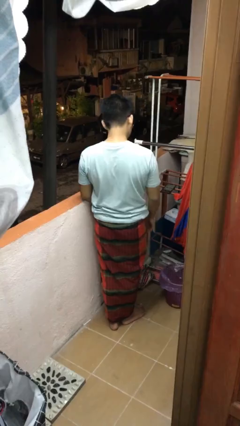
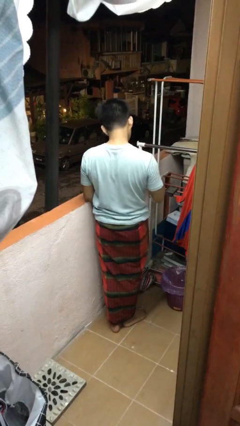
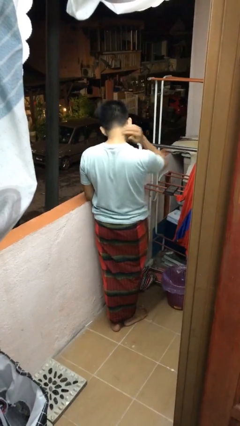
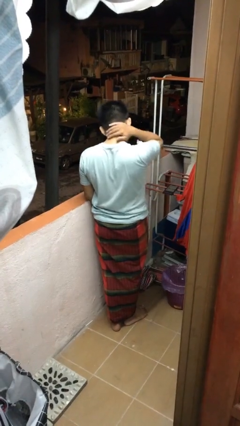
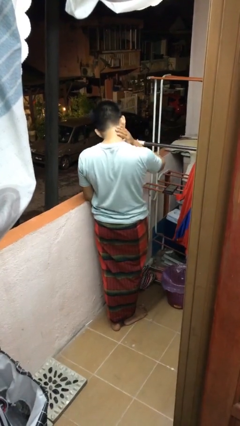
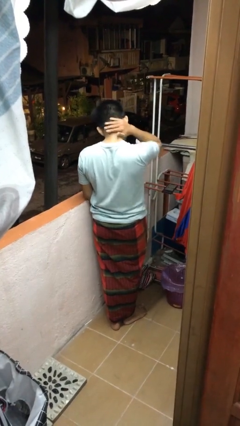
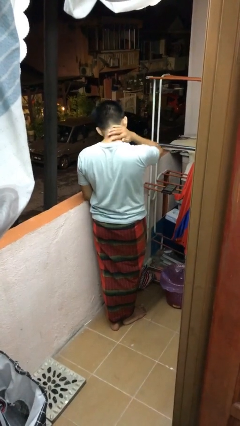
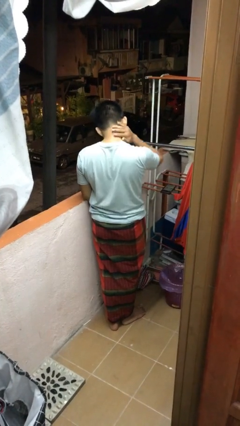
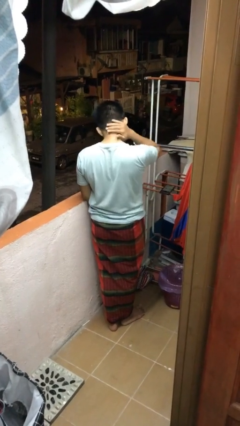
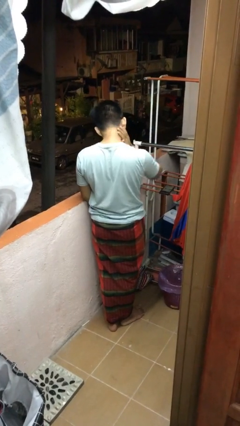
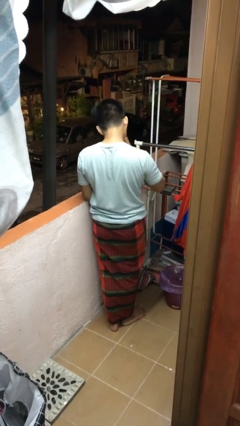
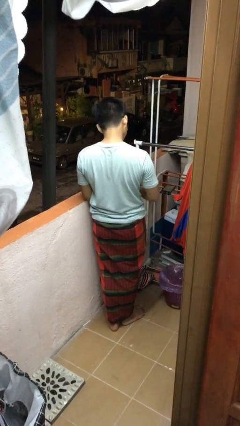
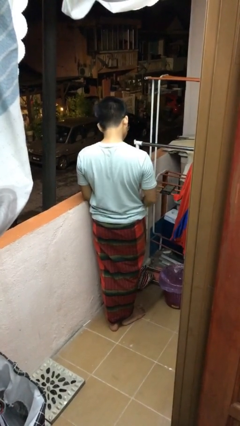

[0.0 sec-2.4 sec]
person rubs neck

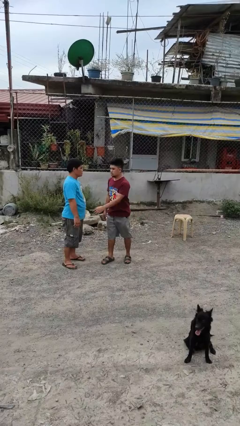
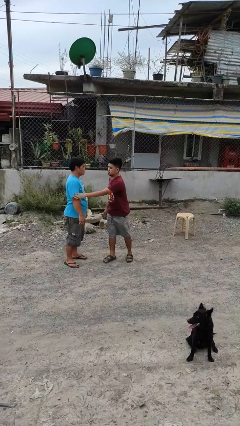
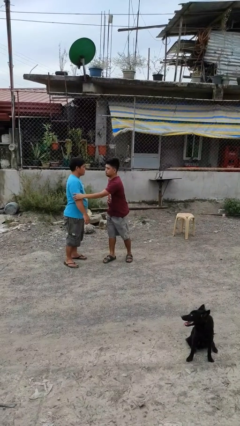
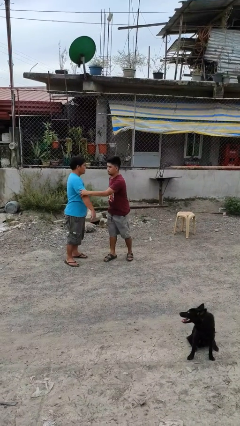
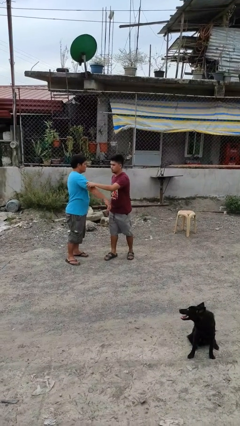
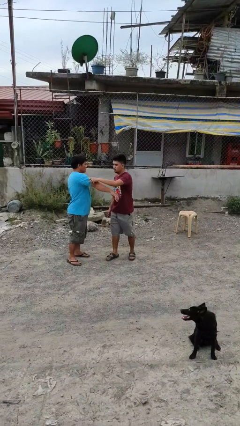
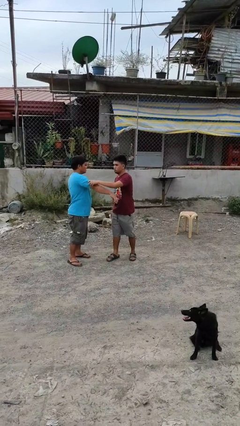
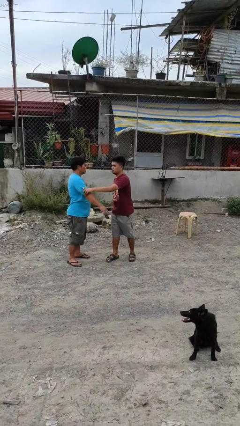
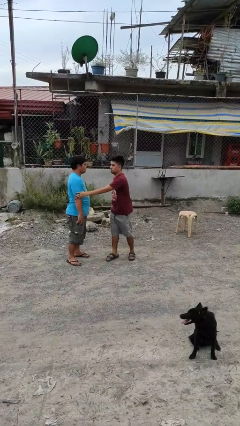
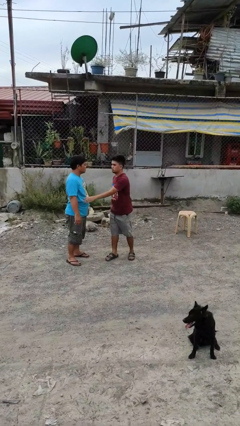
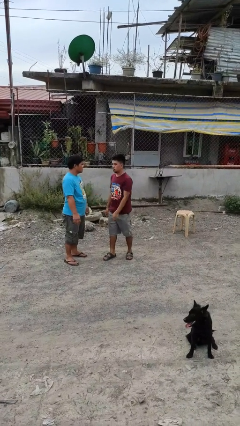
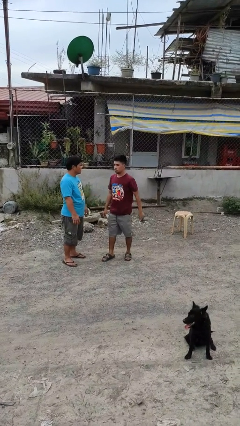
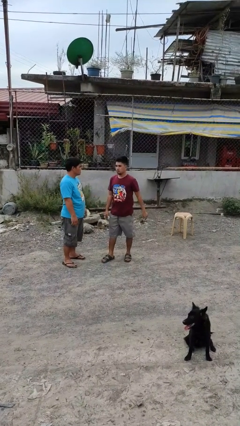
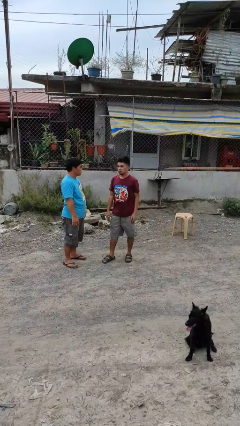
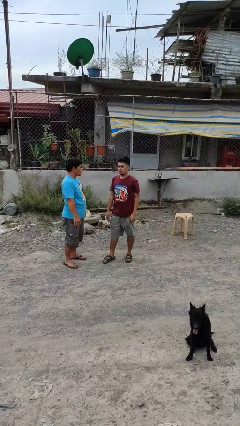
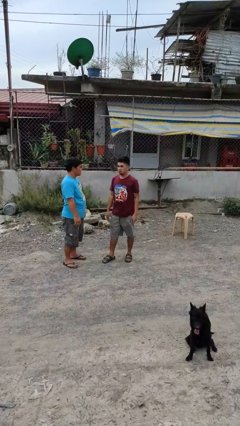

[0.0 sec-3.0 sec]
person grabs person by bicep

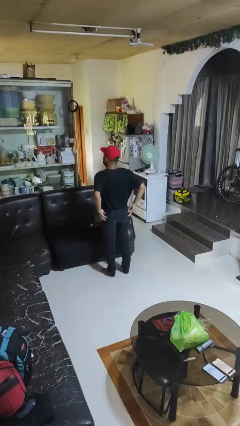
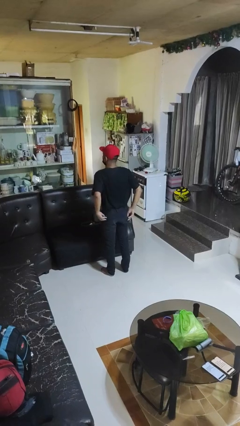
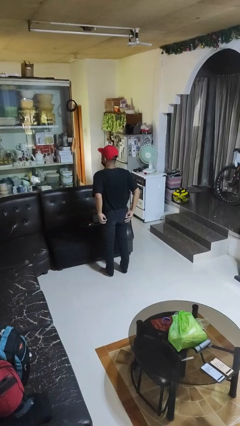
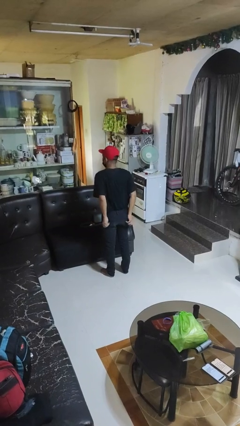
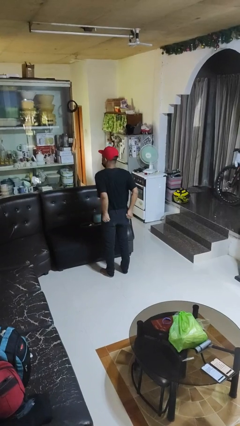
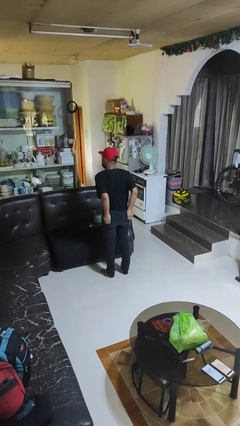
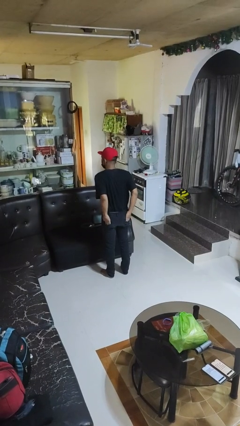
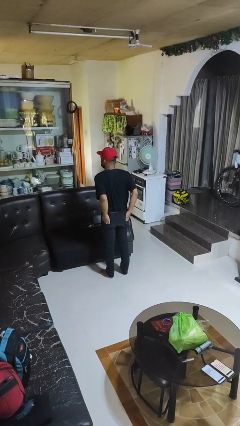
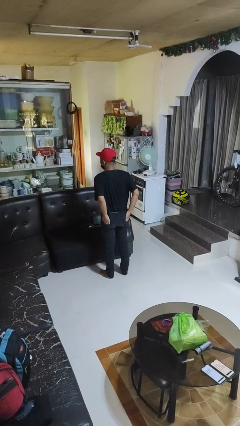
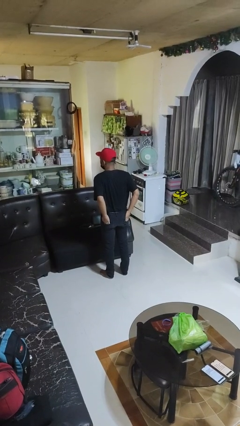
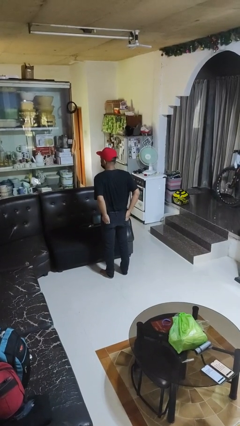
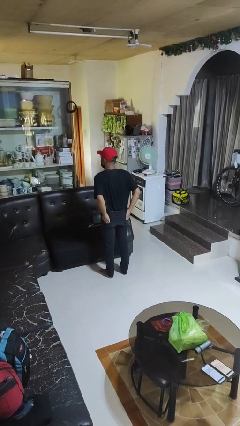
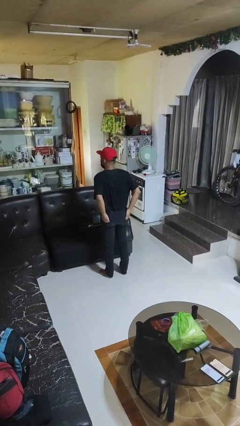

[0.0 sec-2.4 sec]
person puts hands in back pockets

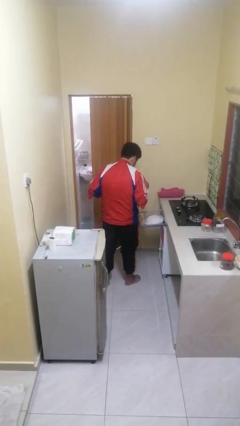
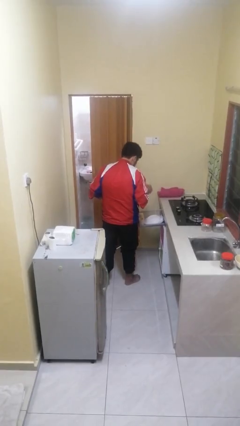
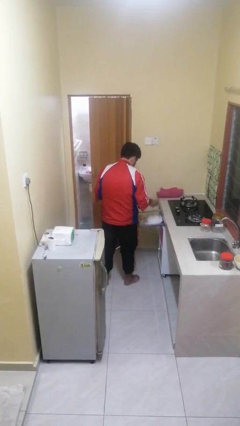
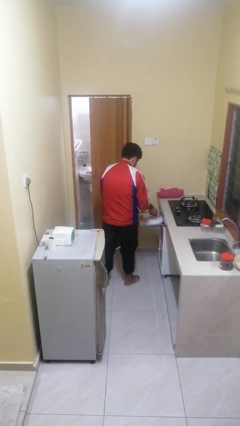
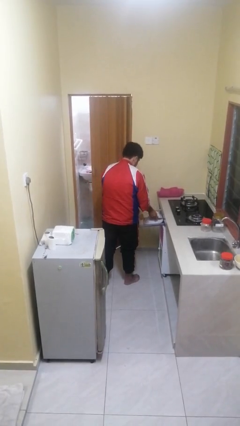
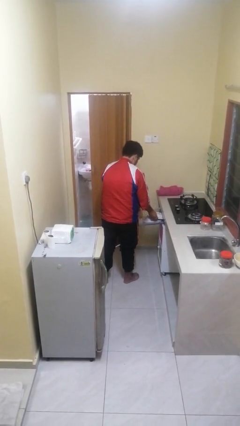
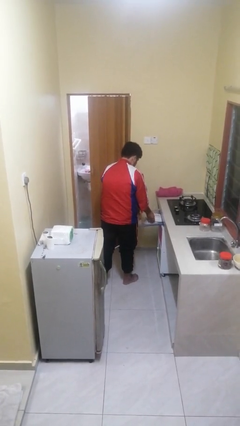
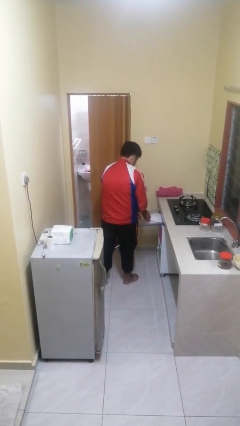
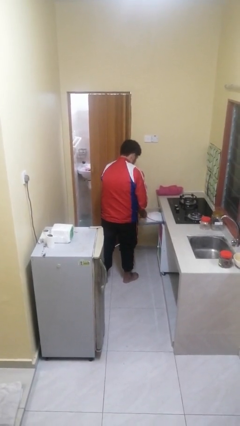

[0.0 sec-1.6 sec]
person puts object into kitchen drawer

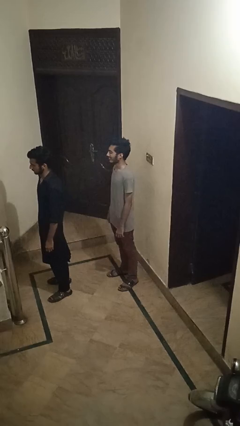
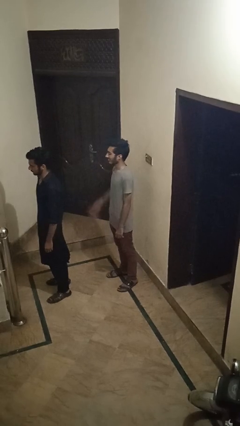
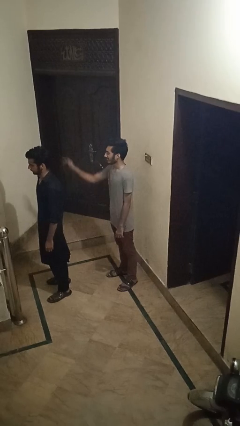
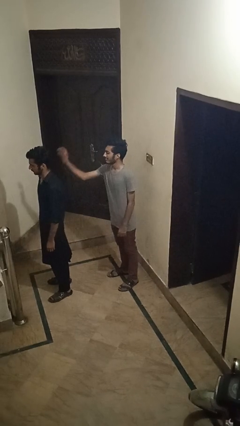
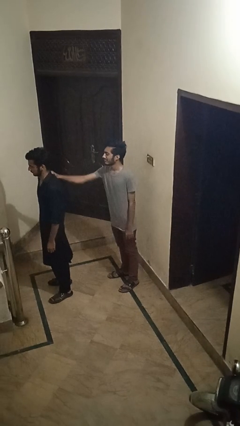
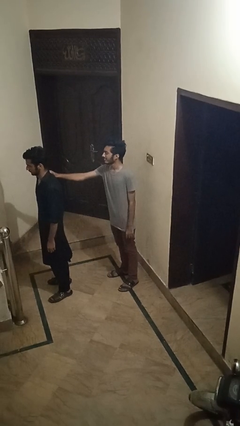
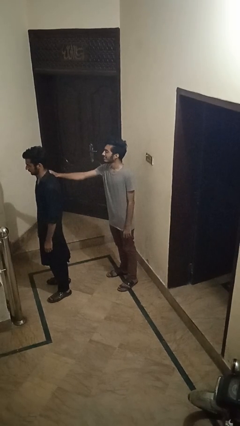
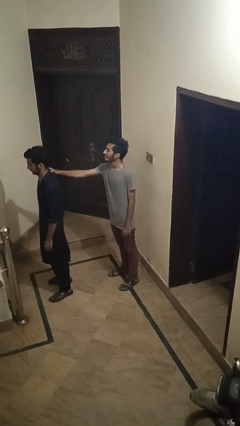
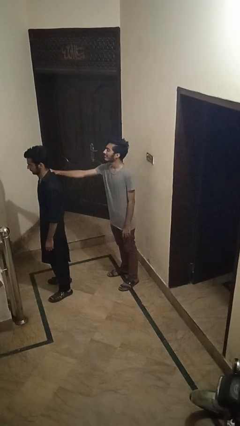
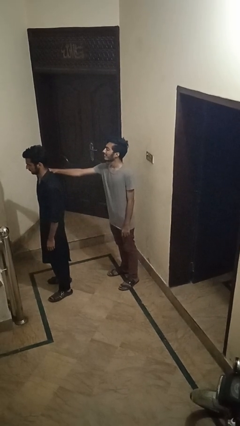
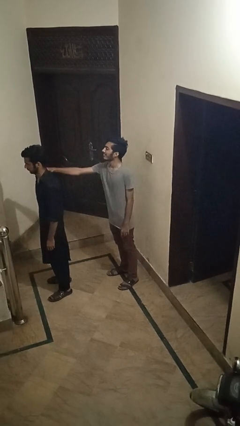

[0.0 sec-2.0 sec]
person grabs person by shoulder

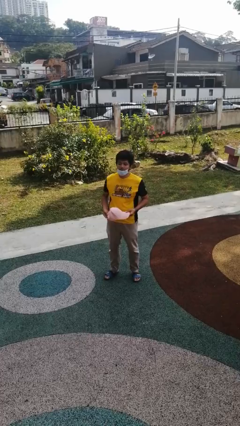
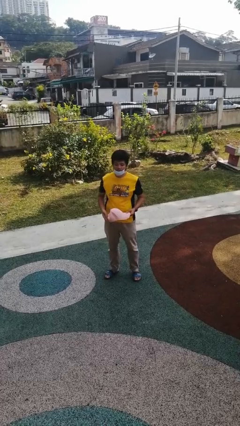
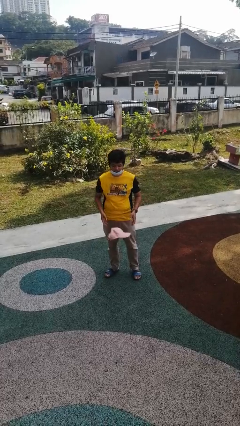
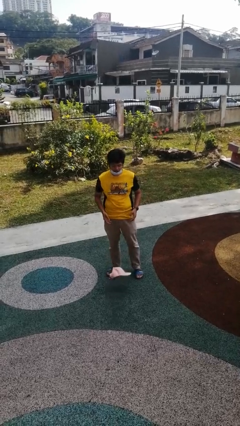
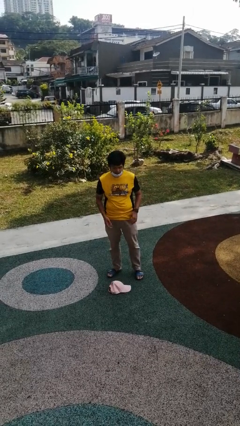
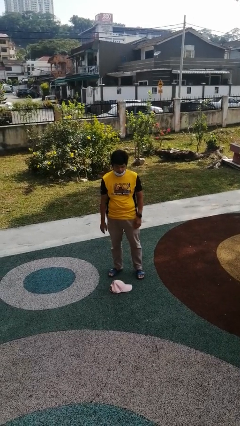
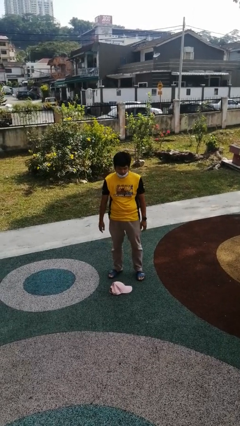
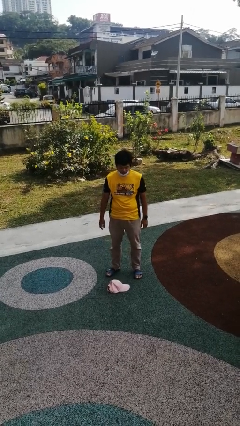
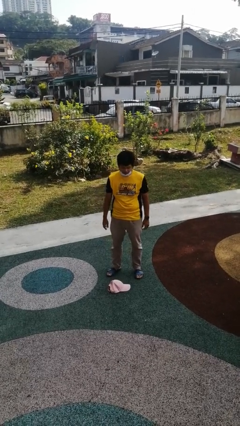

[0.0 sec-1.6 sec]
person drops object

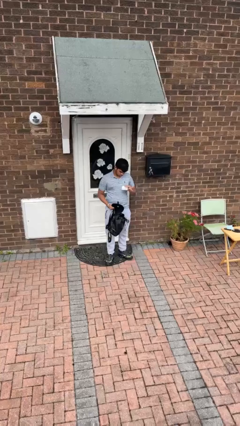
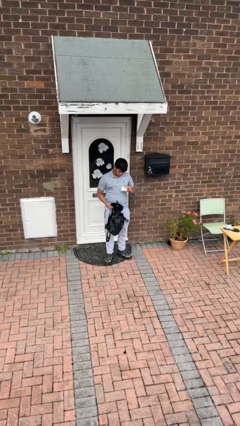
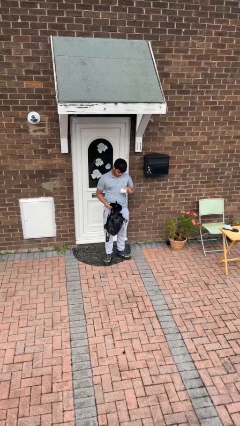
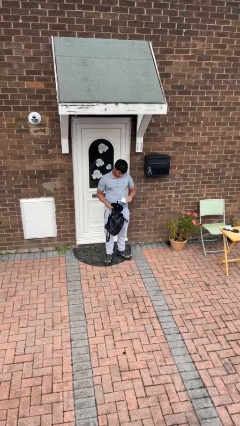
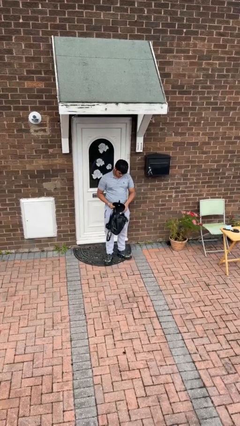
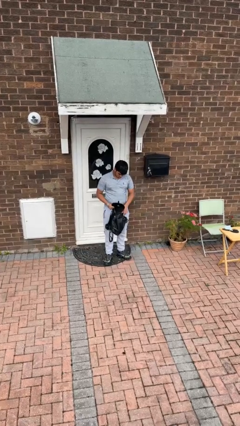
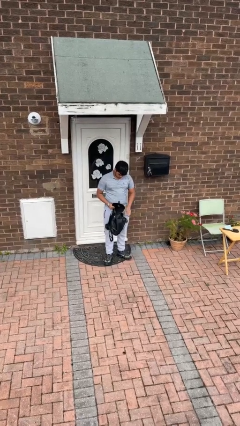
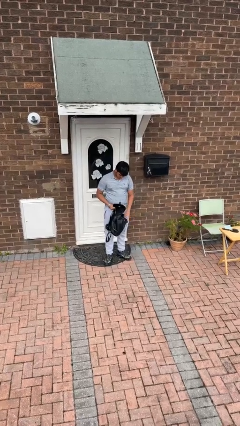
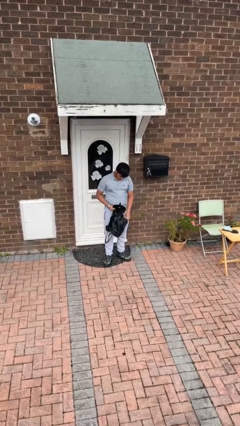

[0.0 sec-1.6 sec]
person puts object into backpack

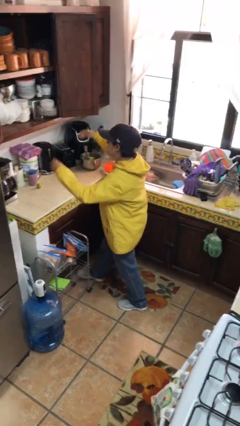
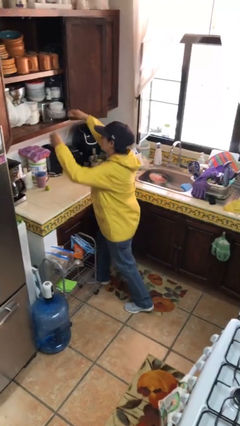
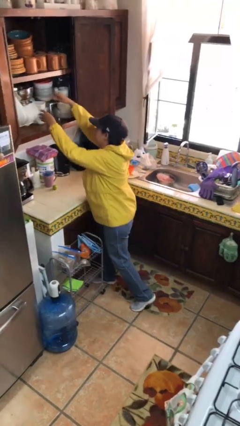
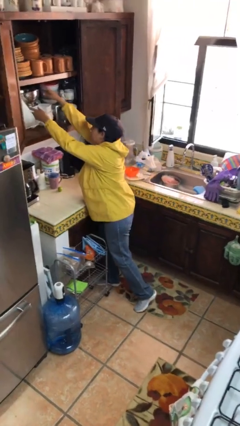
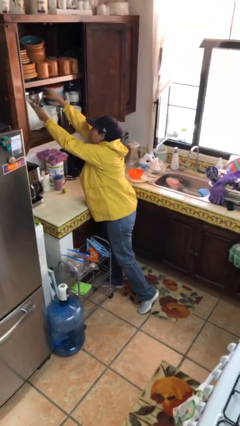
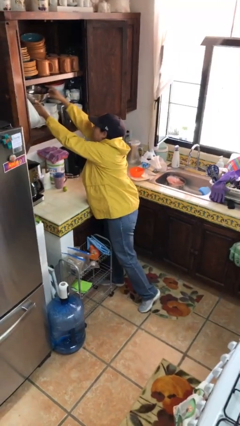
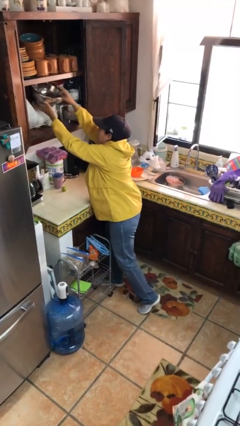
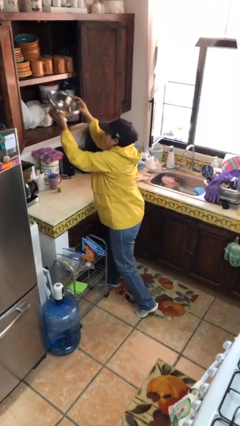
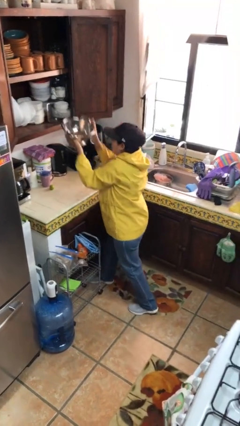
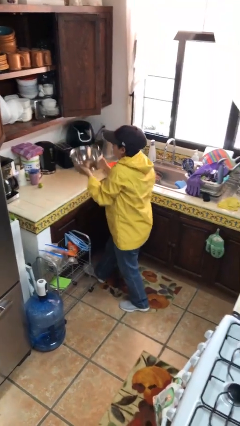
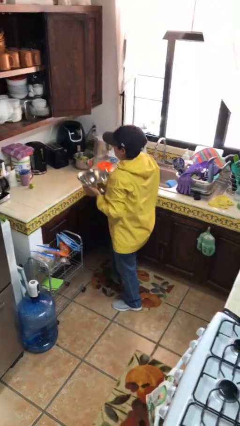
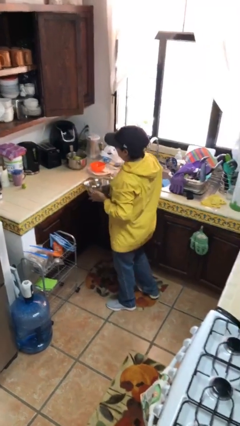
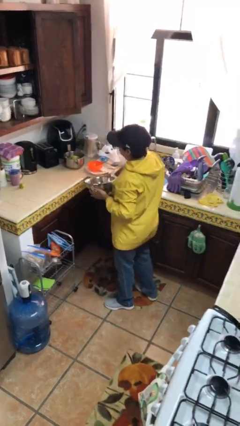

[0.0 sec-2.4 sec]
person picks up object from cabinet
